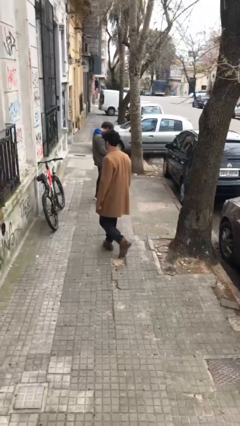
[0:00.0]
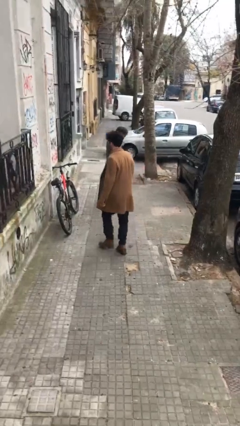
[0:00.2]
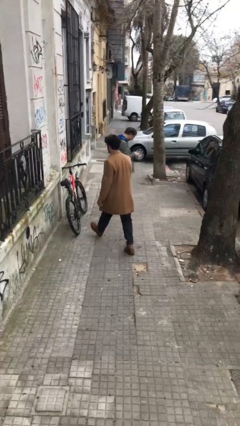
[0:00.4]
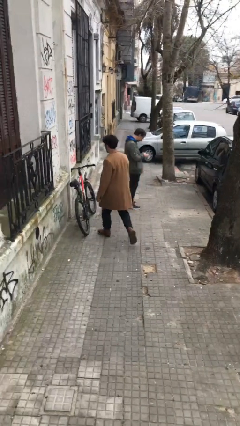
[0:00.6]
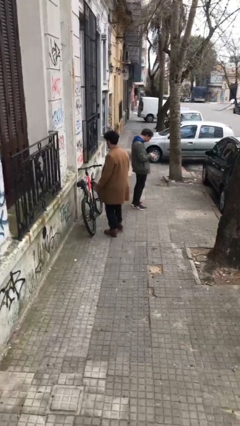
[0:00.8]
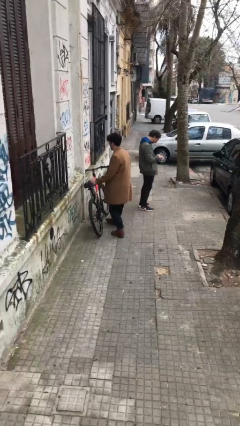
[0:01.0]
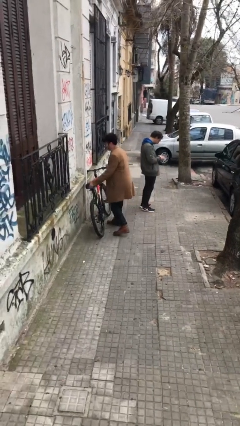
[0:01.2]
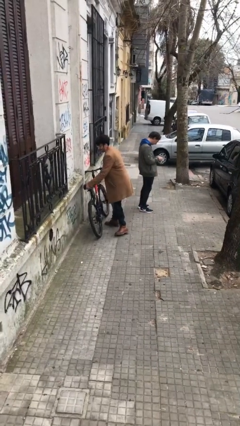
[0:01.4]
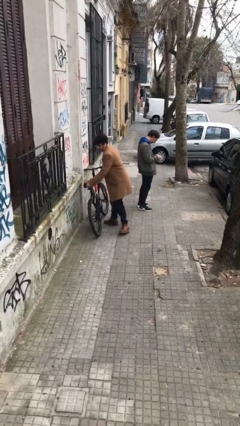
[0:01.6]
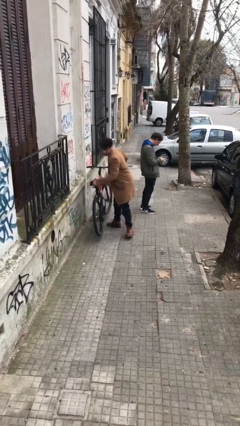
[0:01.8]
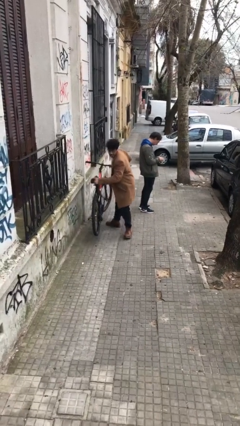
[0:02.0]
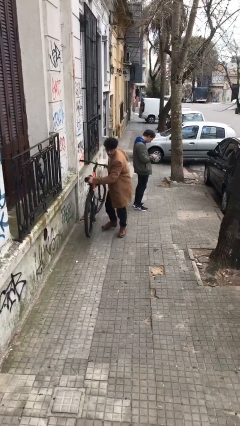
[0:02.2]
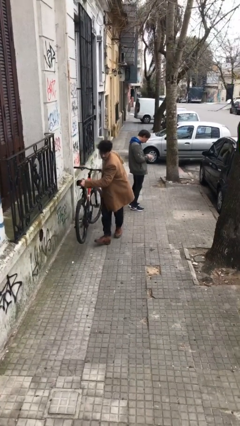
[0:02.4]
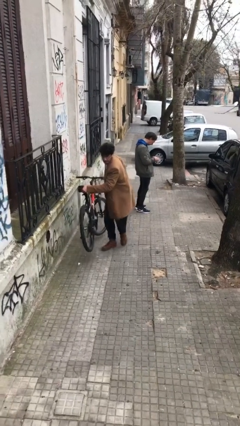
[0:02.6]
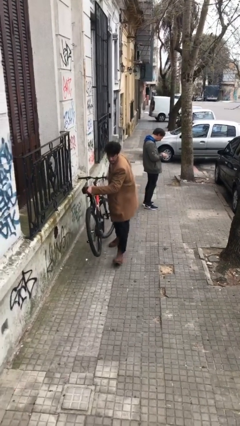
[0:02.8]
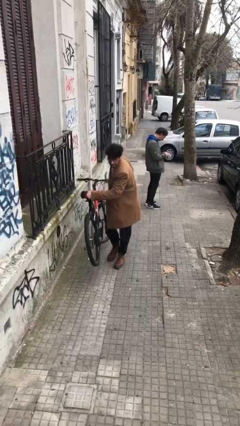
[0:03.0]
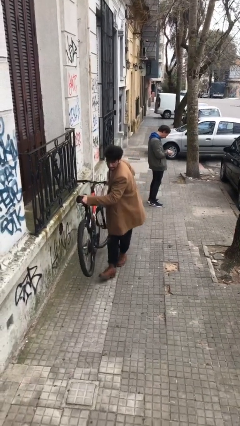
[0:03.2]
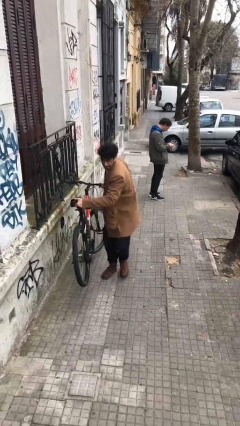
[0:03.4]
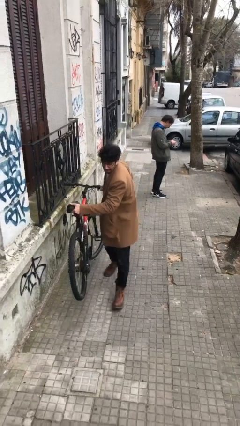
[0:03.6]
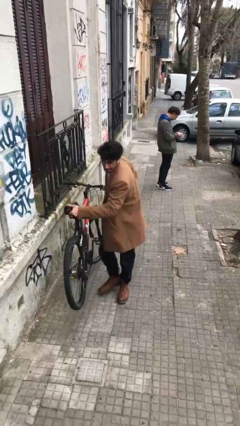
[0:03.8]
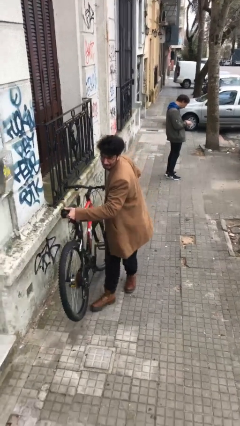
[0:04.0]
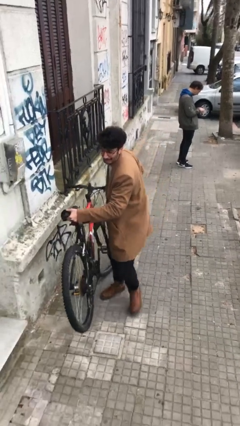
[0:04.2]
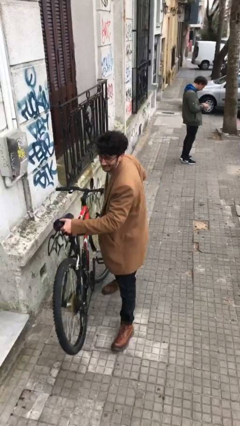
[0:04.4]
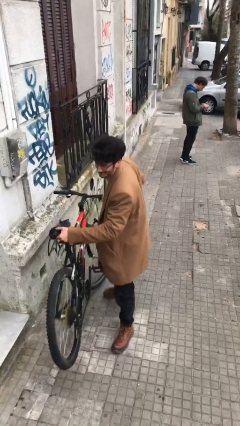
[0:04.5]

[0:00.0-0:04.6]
person steals object from person

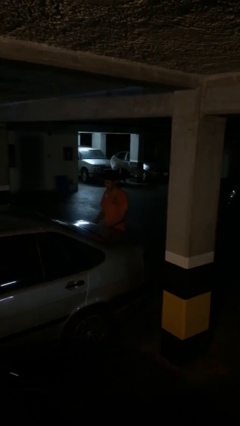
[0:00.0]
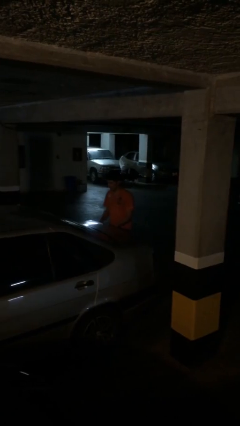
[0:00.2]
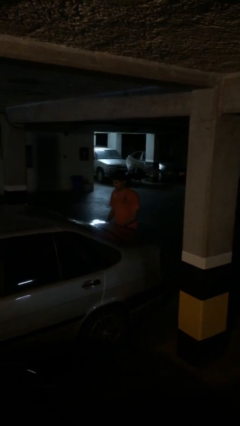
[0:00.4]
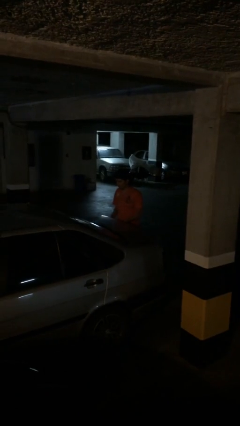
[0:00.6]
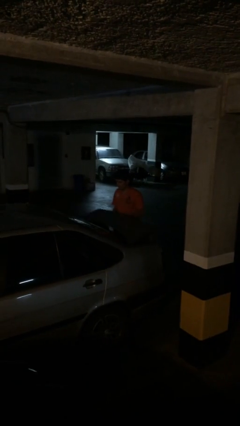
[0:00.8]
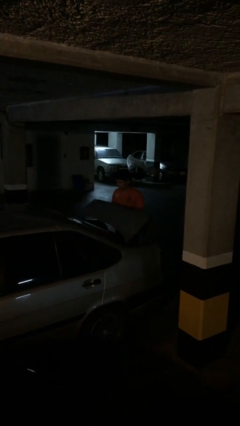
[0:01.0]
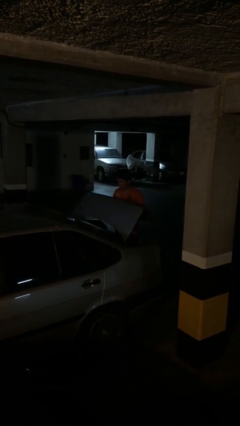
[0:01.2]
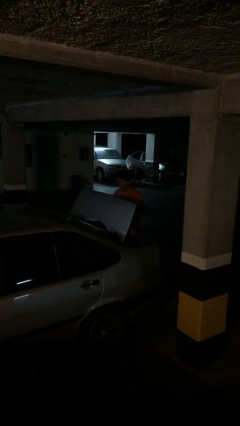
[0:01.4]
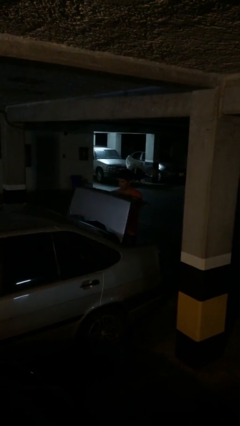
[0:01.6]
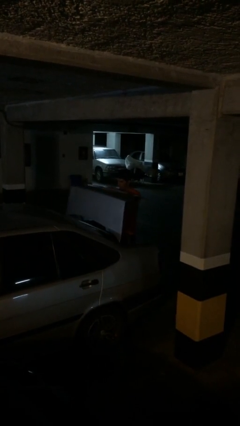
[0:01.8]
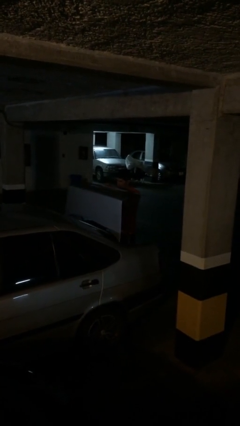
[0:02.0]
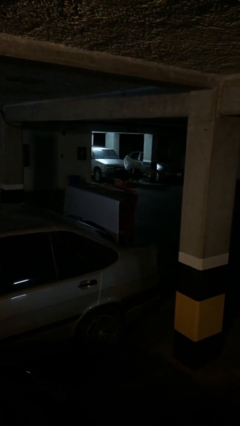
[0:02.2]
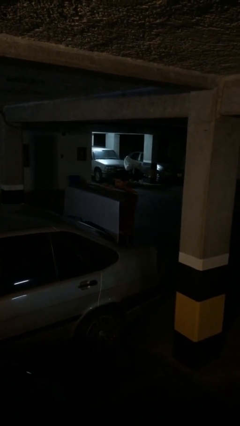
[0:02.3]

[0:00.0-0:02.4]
person opens car trunk

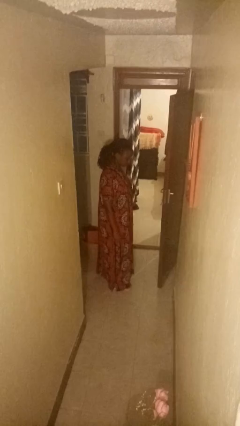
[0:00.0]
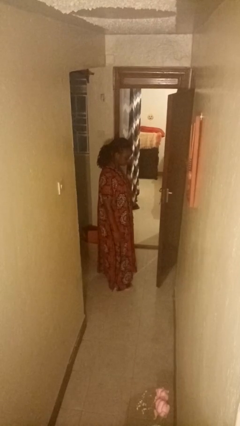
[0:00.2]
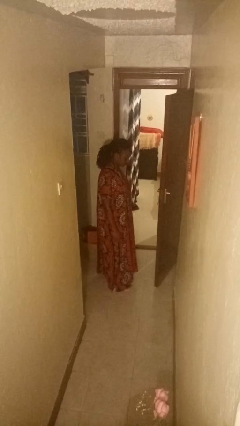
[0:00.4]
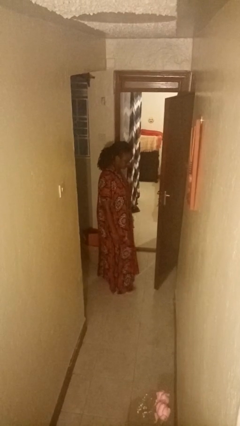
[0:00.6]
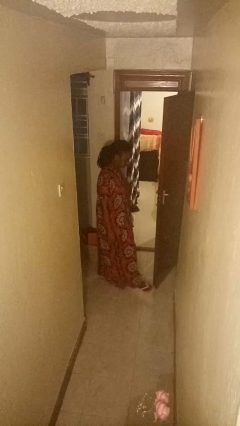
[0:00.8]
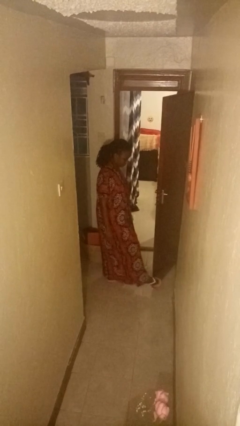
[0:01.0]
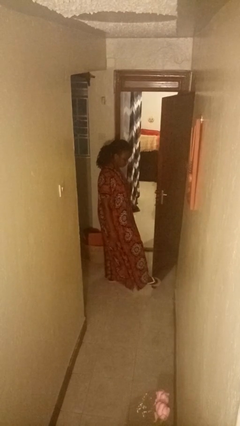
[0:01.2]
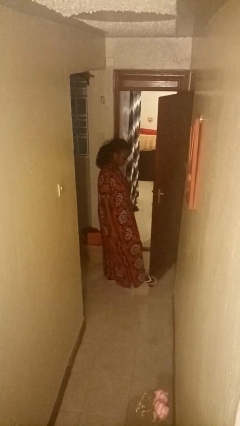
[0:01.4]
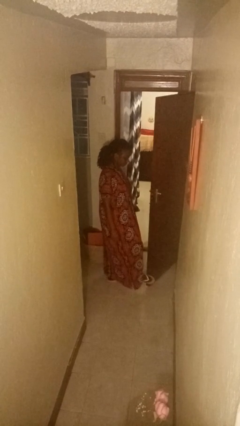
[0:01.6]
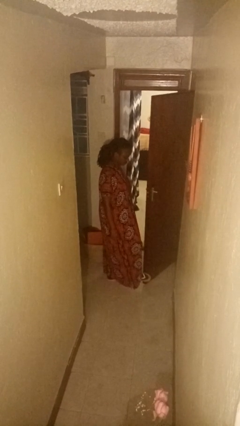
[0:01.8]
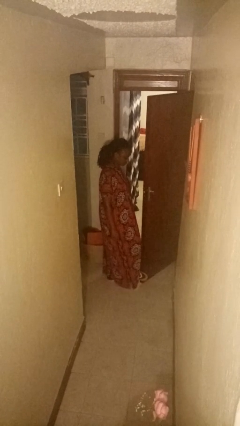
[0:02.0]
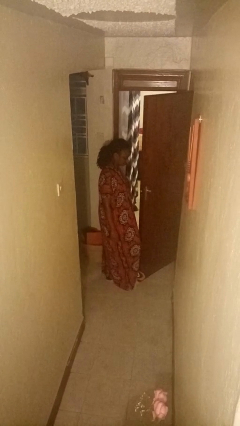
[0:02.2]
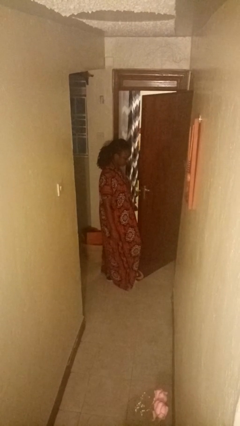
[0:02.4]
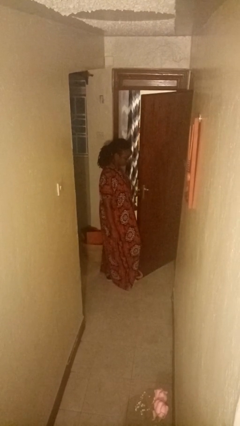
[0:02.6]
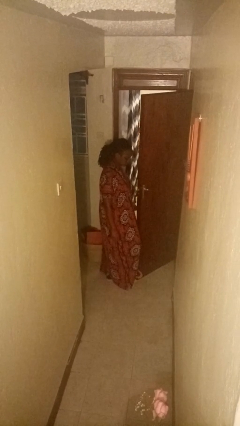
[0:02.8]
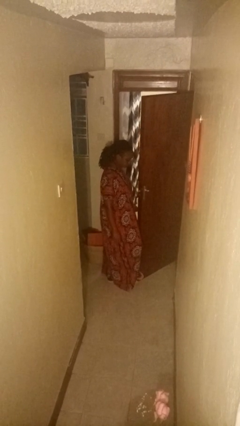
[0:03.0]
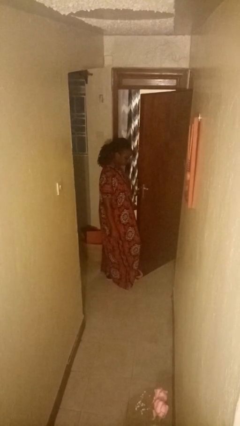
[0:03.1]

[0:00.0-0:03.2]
person opens facility door

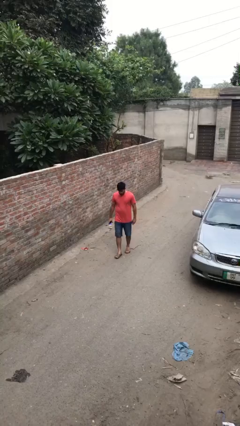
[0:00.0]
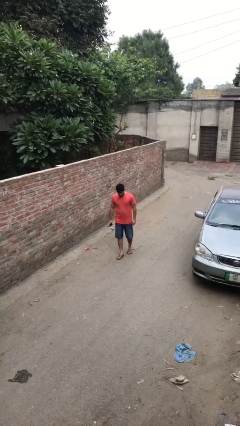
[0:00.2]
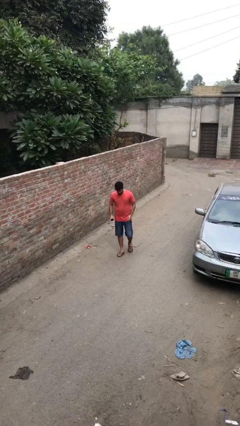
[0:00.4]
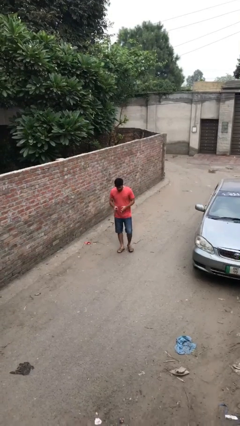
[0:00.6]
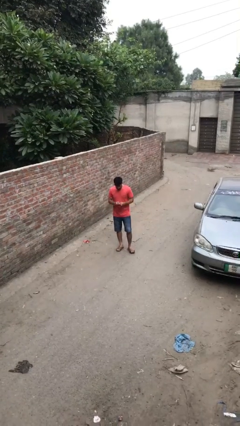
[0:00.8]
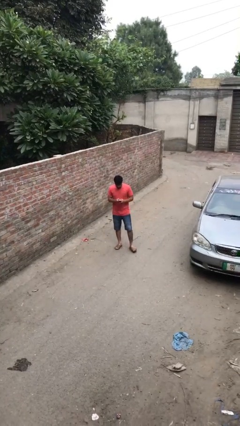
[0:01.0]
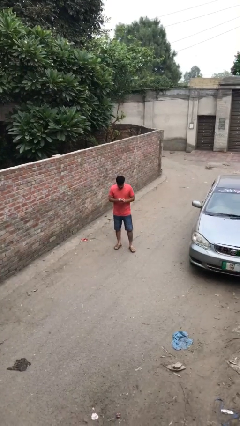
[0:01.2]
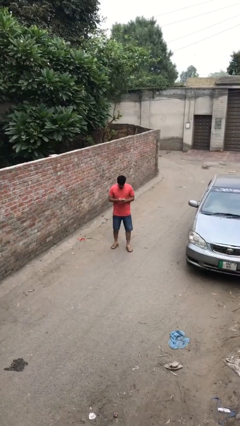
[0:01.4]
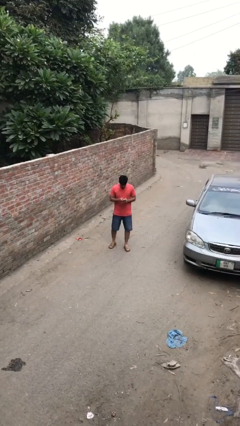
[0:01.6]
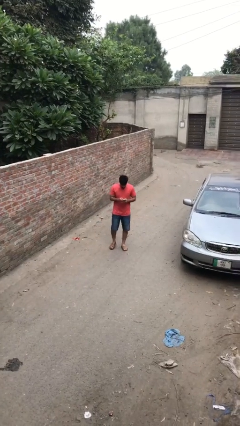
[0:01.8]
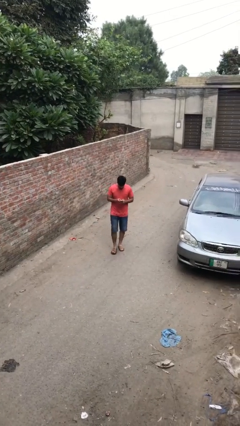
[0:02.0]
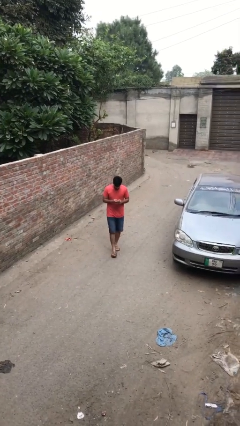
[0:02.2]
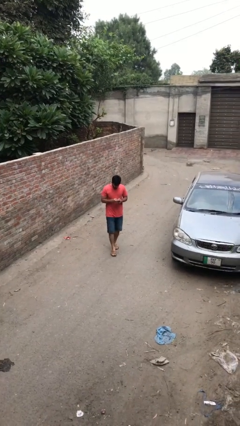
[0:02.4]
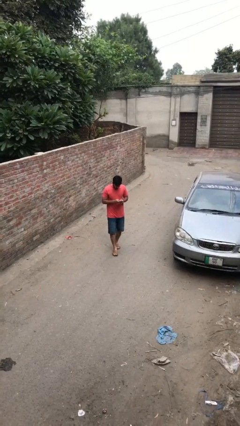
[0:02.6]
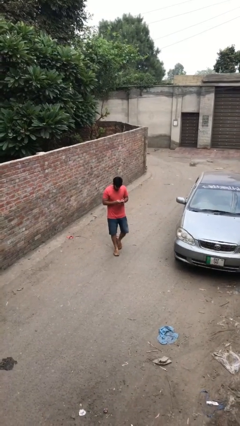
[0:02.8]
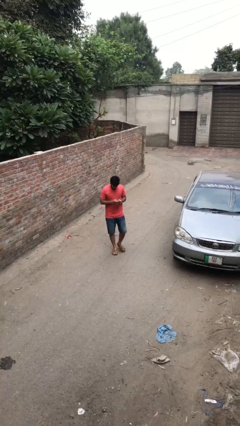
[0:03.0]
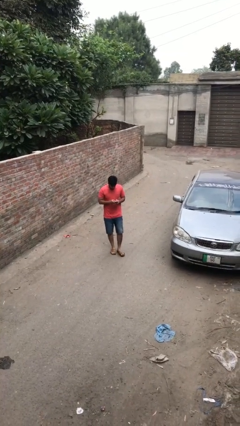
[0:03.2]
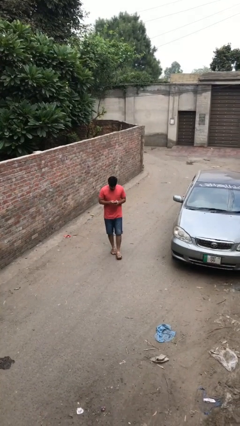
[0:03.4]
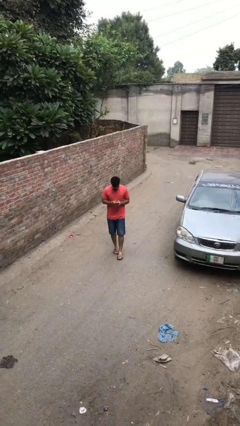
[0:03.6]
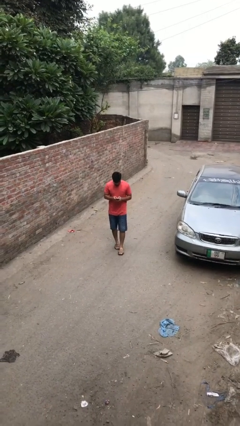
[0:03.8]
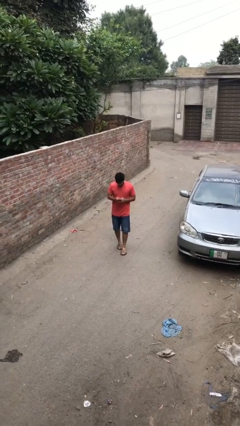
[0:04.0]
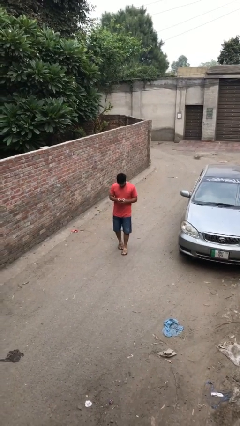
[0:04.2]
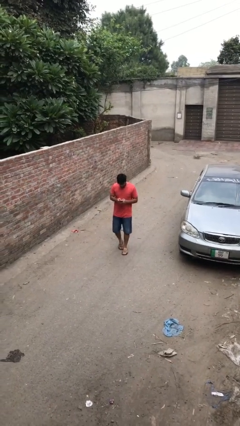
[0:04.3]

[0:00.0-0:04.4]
person texts on phone

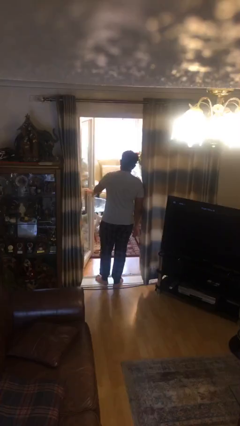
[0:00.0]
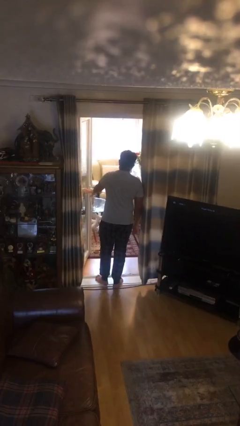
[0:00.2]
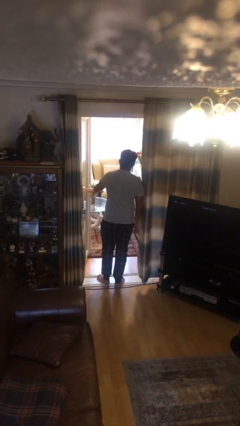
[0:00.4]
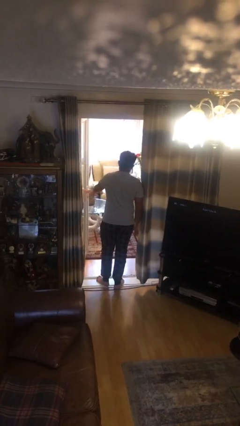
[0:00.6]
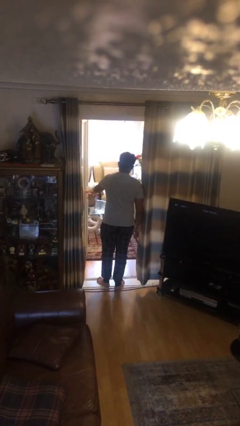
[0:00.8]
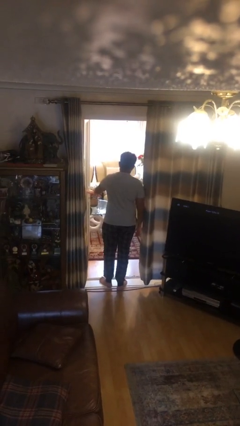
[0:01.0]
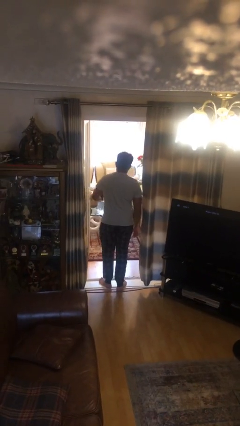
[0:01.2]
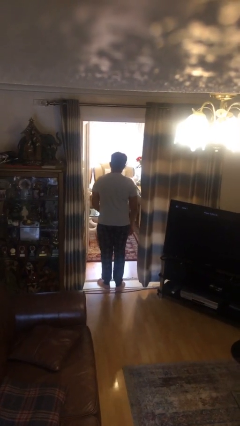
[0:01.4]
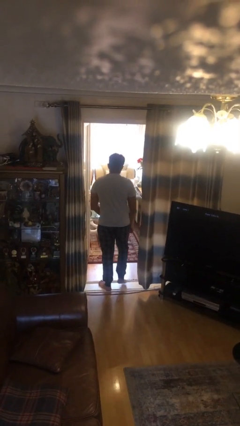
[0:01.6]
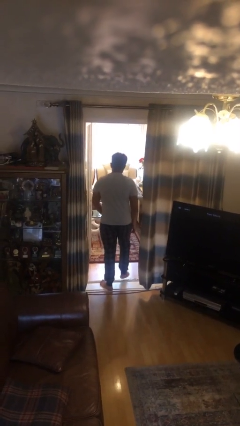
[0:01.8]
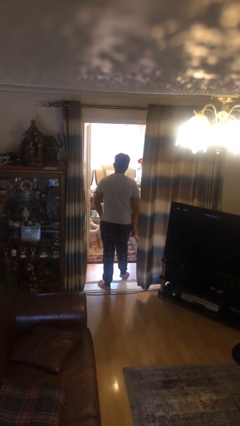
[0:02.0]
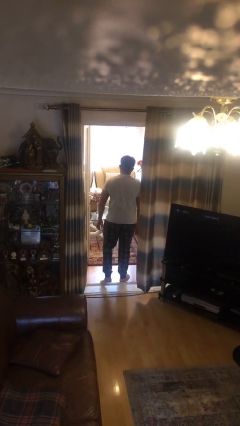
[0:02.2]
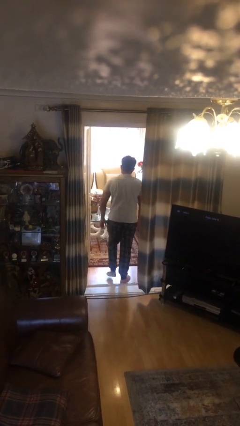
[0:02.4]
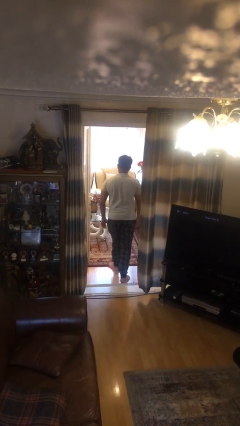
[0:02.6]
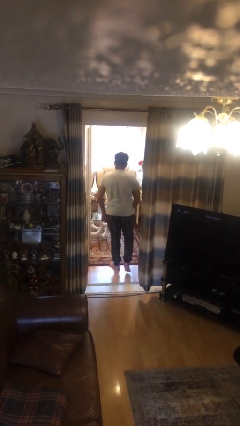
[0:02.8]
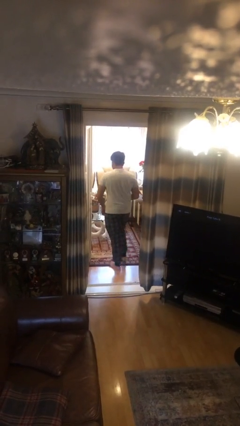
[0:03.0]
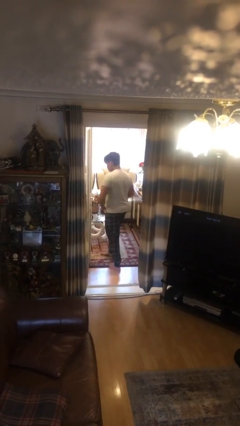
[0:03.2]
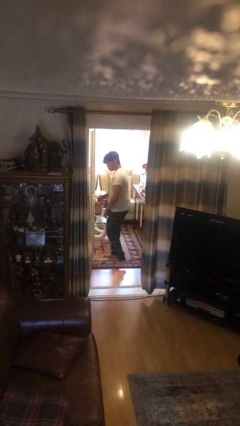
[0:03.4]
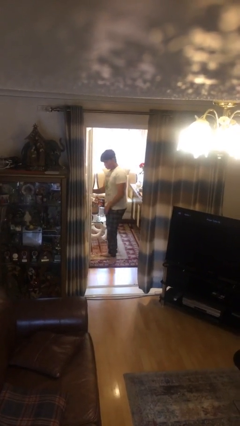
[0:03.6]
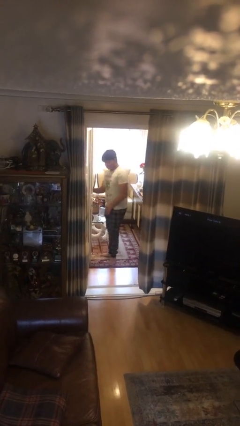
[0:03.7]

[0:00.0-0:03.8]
person exits scene through structure
